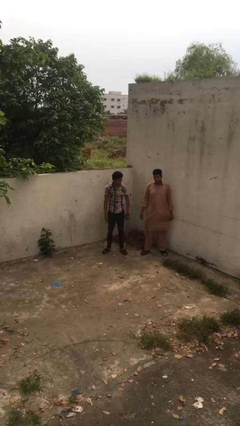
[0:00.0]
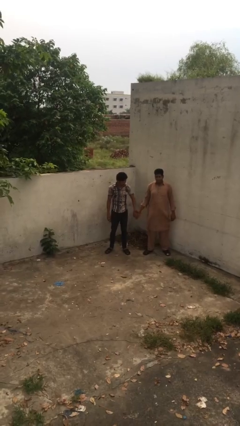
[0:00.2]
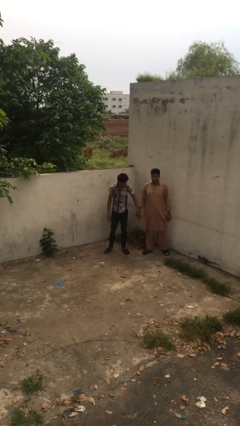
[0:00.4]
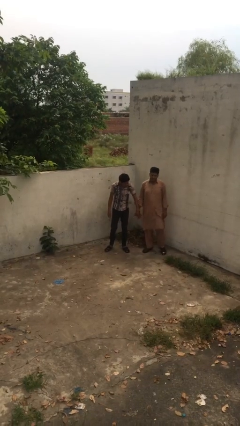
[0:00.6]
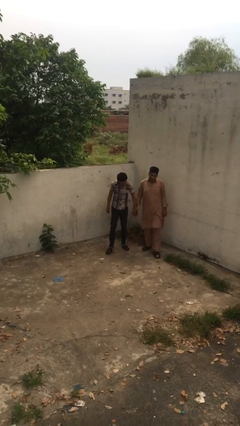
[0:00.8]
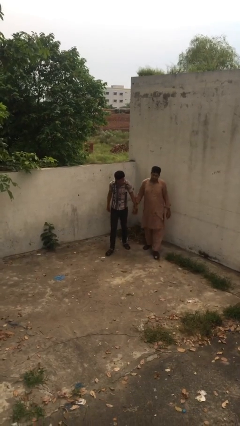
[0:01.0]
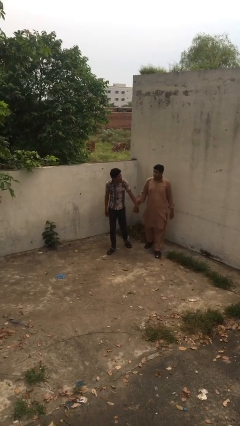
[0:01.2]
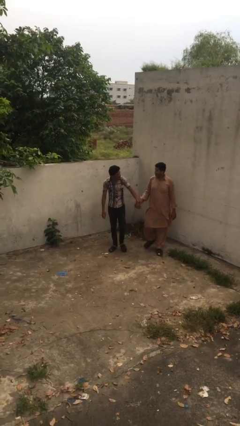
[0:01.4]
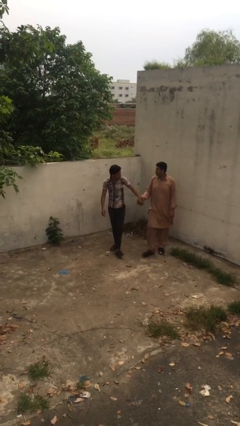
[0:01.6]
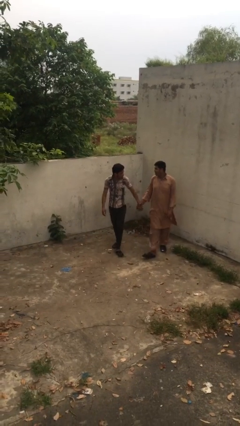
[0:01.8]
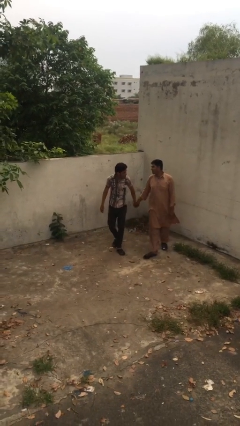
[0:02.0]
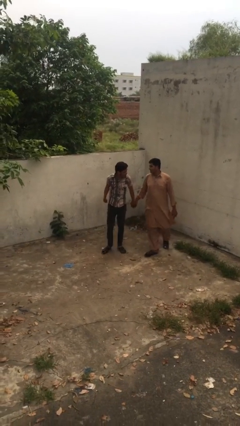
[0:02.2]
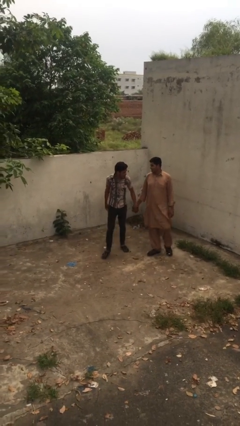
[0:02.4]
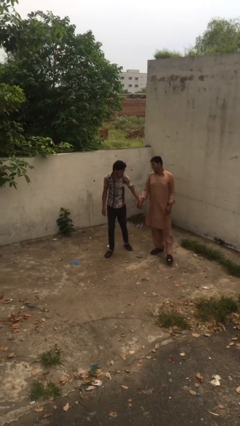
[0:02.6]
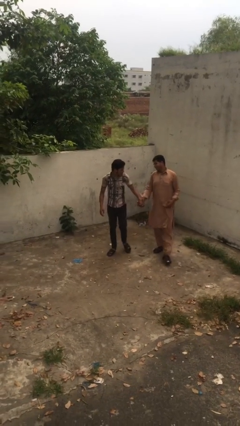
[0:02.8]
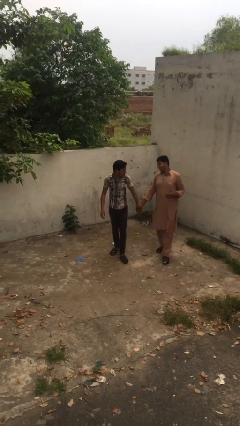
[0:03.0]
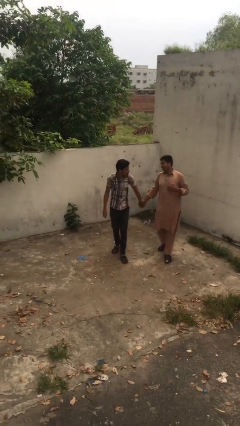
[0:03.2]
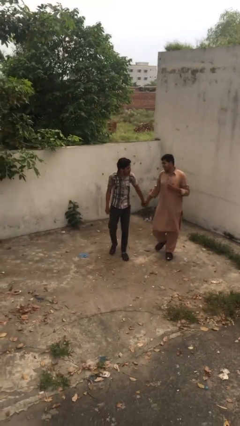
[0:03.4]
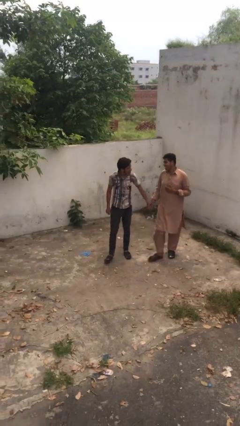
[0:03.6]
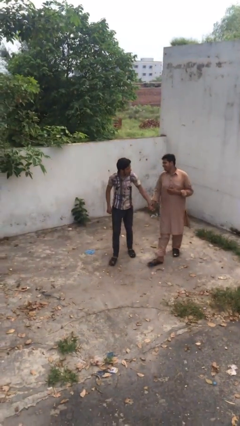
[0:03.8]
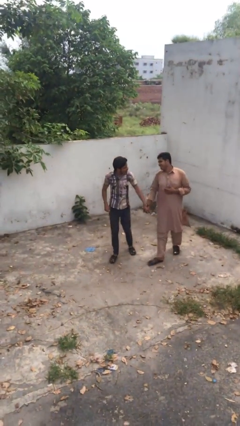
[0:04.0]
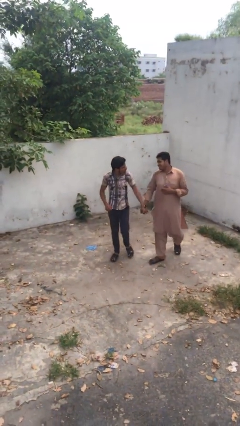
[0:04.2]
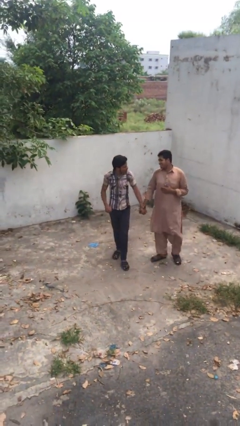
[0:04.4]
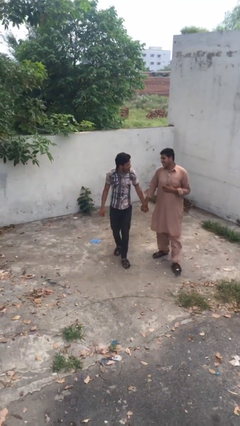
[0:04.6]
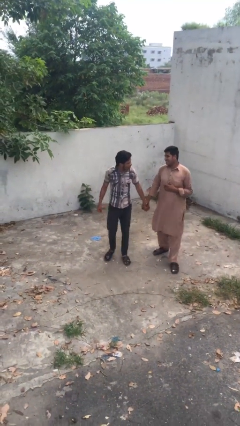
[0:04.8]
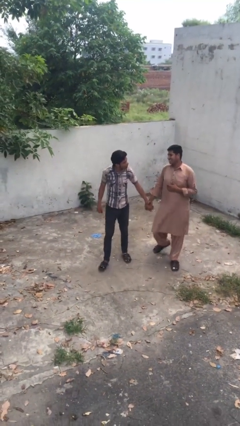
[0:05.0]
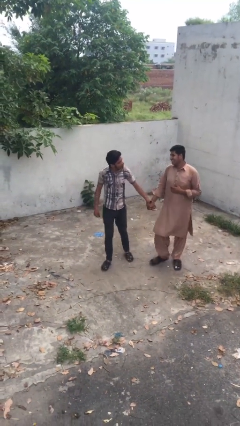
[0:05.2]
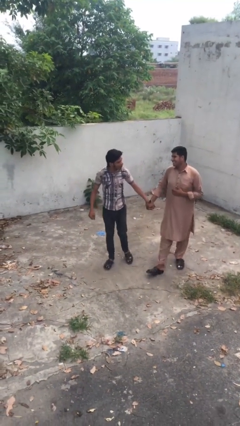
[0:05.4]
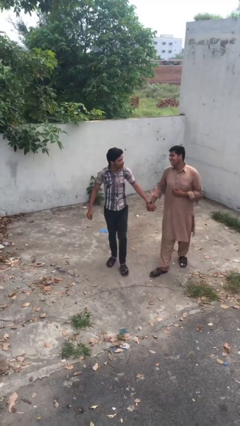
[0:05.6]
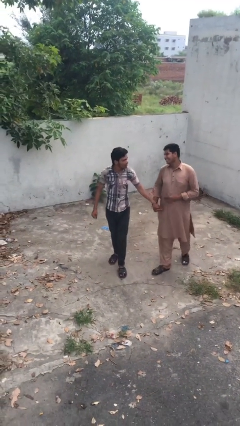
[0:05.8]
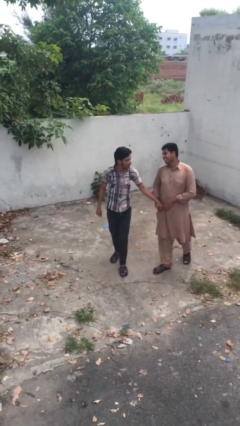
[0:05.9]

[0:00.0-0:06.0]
person holds hand

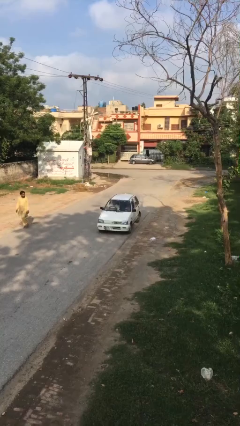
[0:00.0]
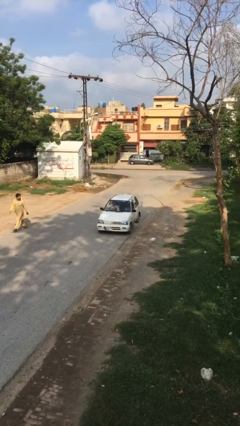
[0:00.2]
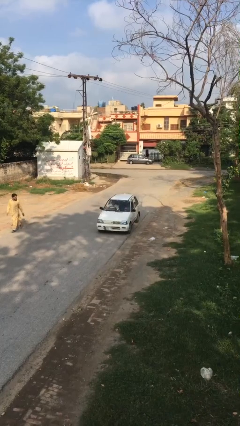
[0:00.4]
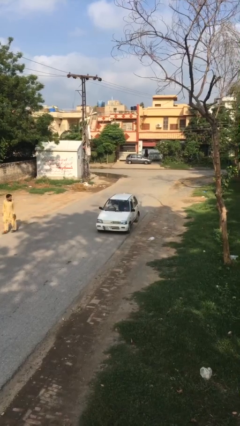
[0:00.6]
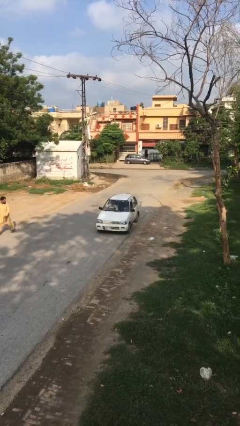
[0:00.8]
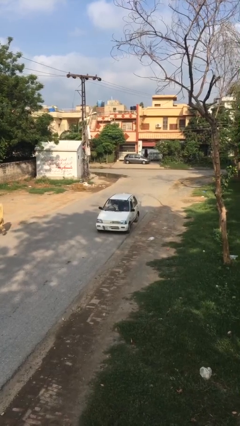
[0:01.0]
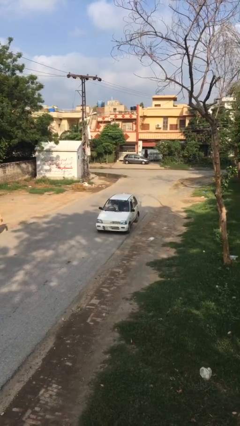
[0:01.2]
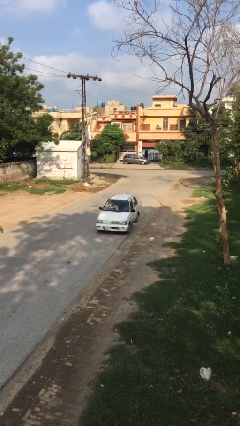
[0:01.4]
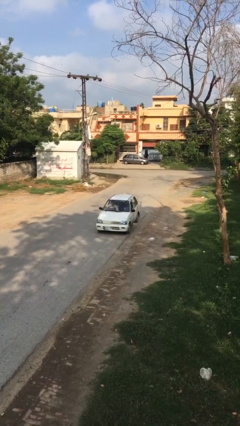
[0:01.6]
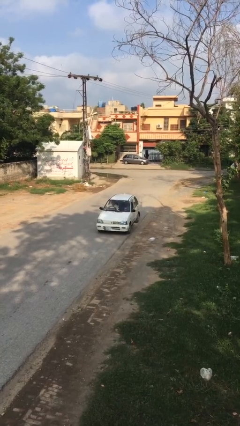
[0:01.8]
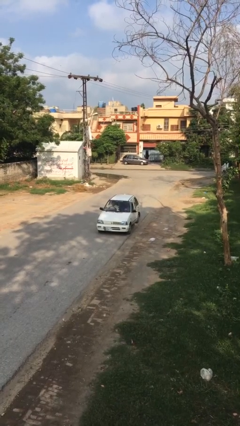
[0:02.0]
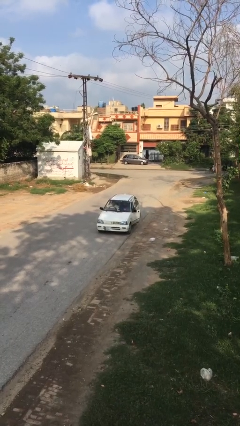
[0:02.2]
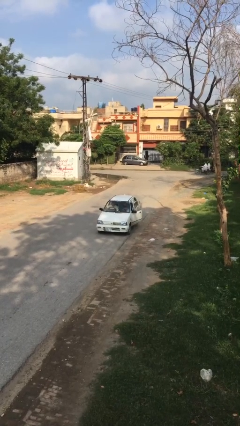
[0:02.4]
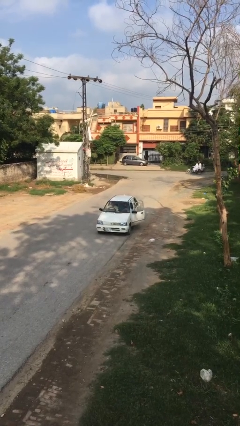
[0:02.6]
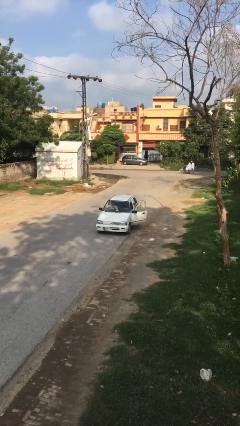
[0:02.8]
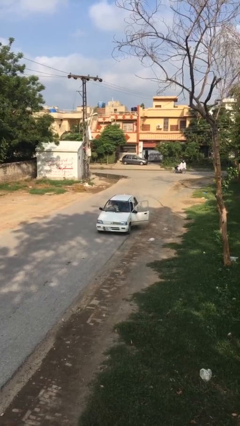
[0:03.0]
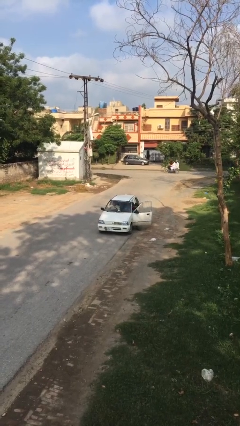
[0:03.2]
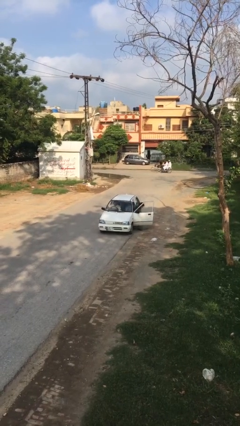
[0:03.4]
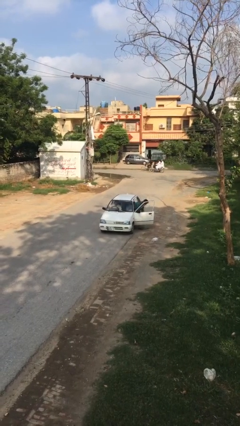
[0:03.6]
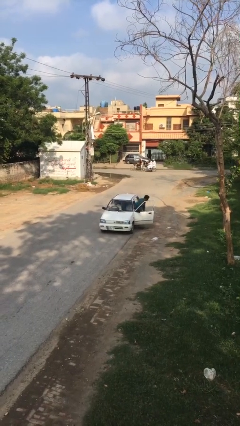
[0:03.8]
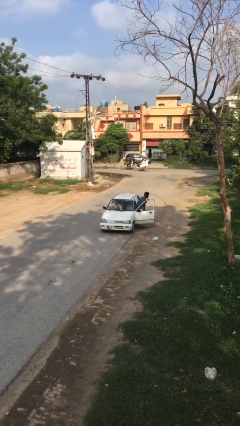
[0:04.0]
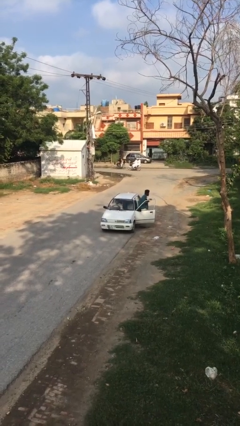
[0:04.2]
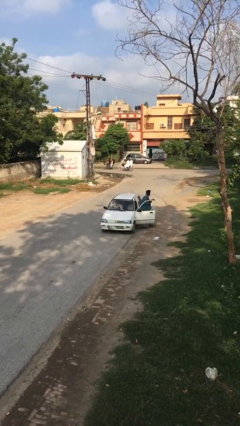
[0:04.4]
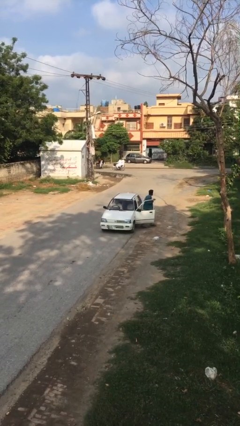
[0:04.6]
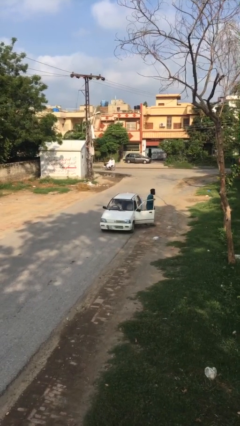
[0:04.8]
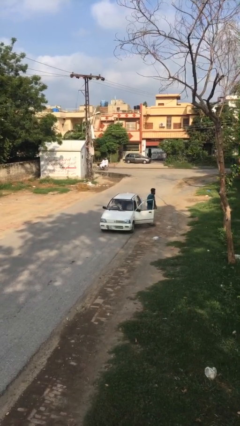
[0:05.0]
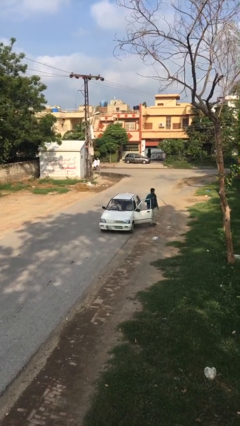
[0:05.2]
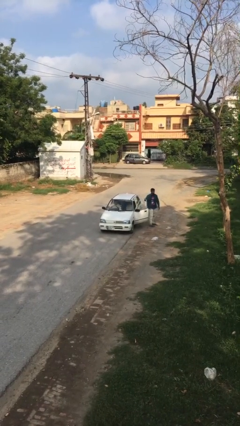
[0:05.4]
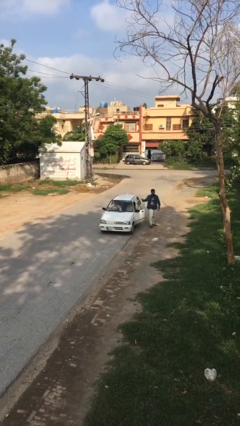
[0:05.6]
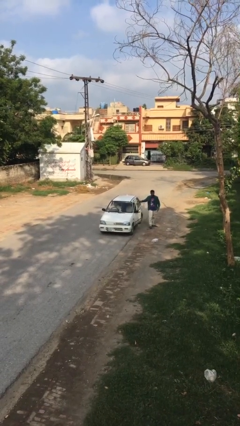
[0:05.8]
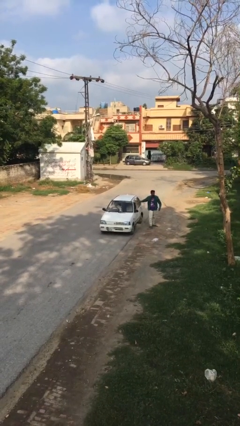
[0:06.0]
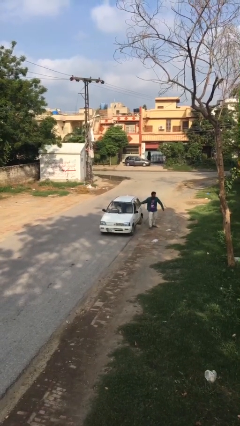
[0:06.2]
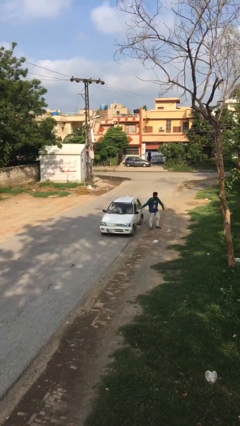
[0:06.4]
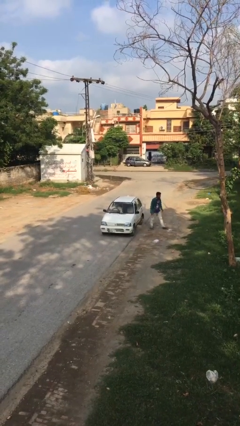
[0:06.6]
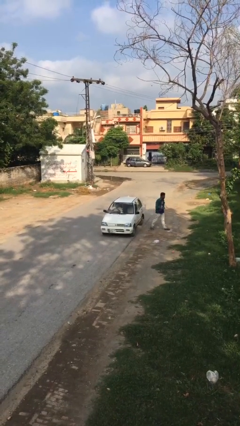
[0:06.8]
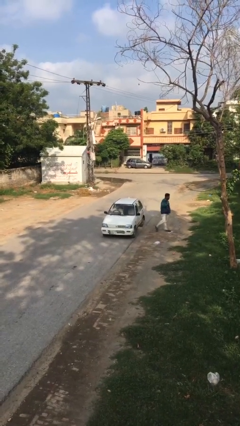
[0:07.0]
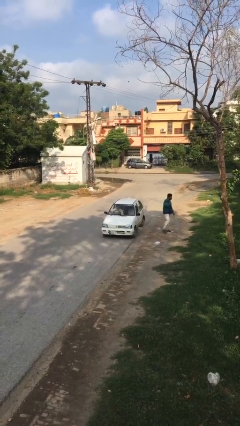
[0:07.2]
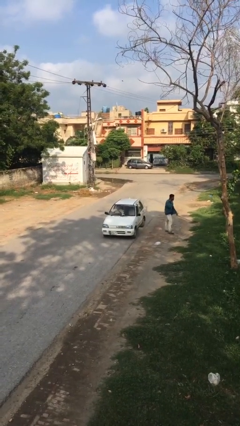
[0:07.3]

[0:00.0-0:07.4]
car drops off person

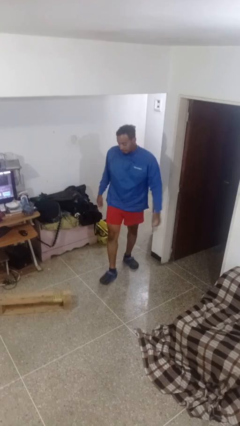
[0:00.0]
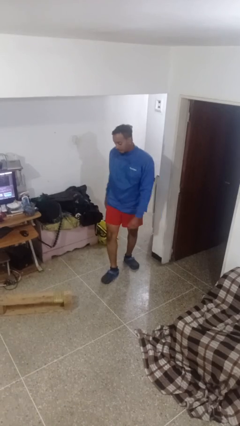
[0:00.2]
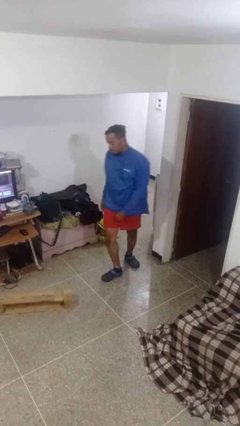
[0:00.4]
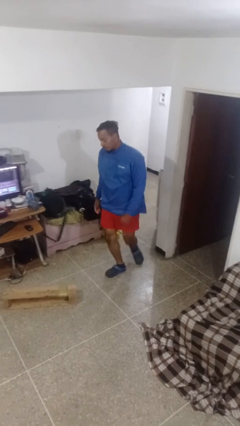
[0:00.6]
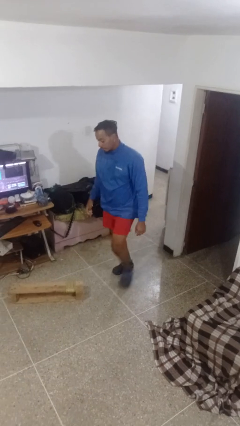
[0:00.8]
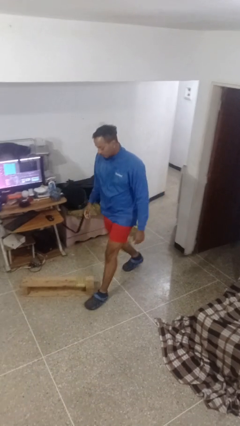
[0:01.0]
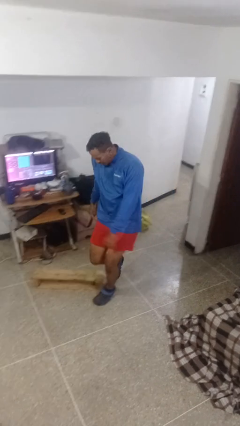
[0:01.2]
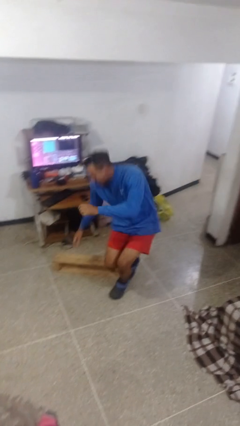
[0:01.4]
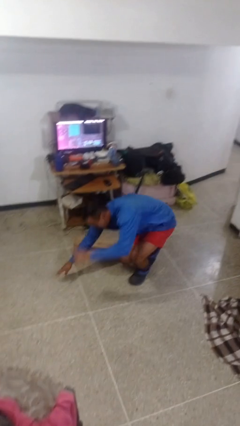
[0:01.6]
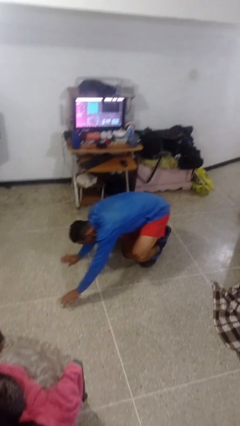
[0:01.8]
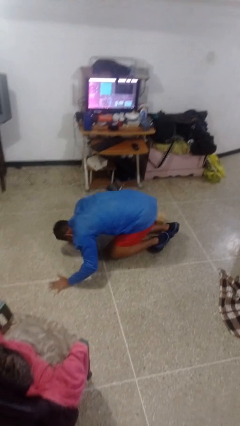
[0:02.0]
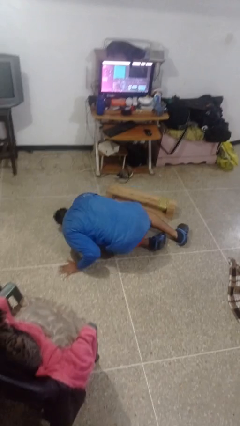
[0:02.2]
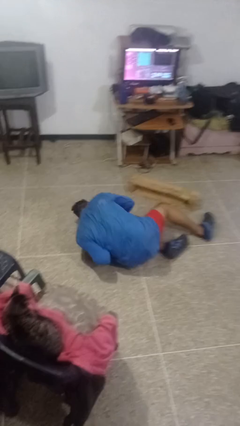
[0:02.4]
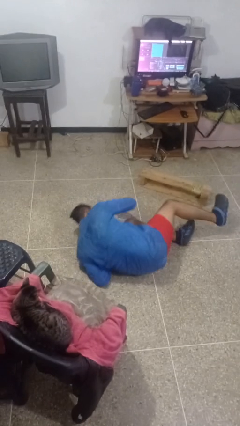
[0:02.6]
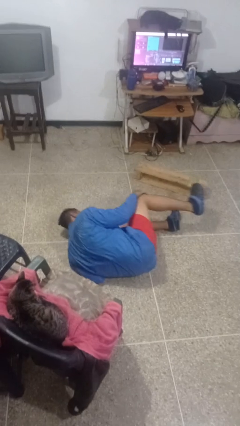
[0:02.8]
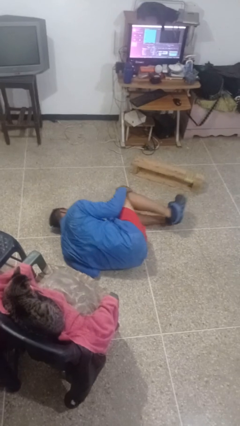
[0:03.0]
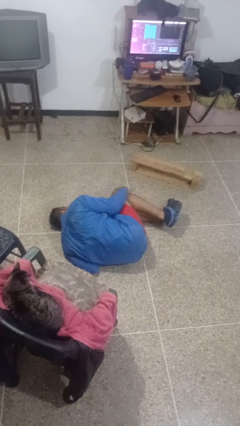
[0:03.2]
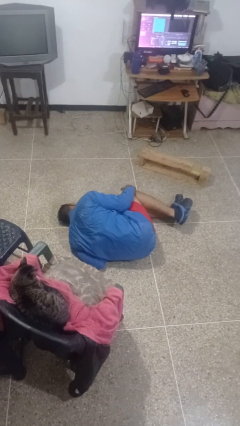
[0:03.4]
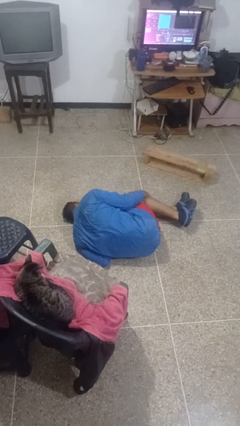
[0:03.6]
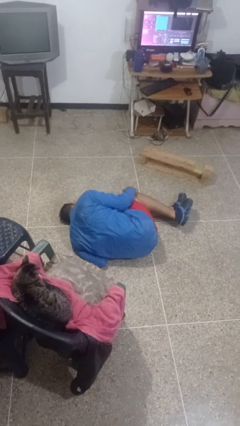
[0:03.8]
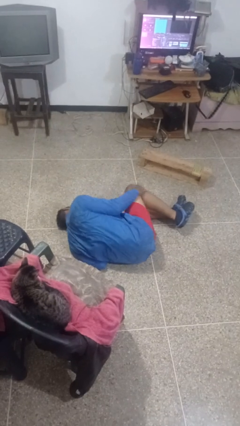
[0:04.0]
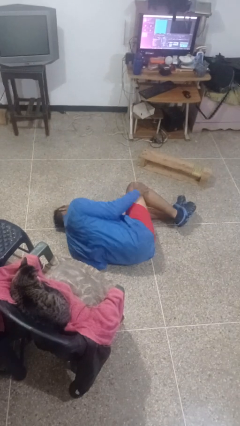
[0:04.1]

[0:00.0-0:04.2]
person trips on object on floor

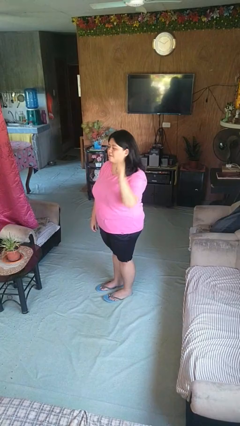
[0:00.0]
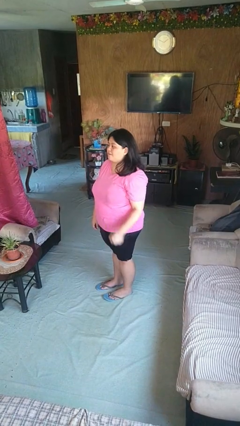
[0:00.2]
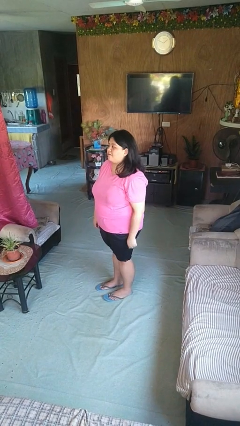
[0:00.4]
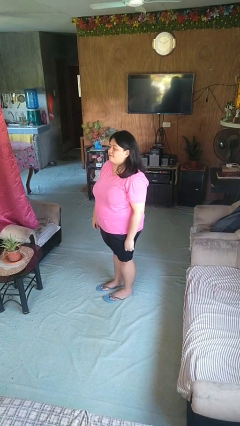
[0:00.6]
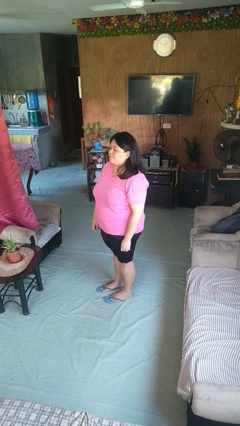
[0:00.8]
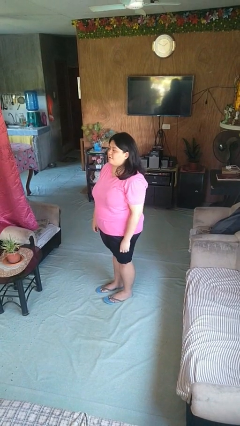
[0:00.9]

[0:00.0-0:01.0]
person gestures lower hand
